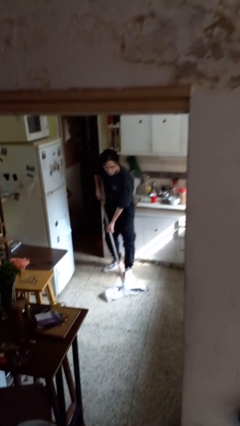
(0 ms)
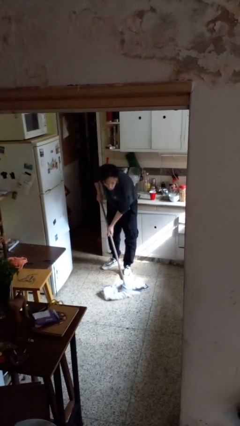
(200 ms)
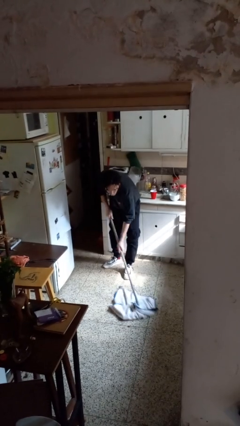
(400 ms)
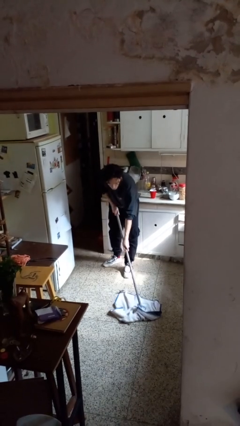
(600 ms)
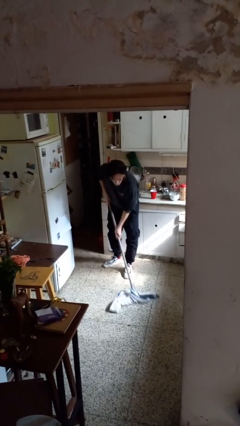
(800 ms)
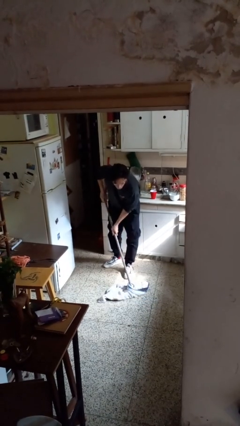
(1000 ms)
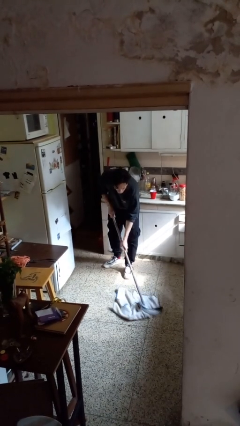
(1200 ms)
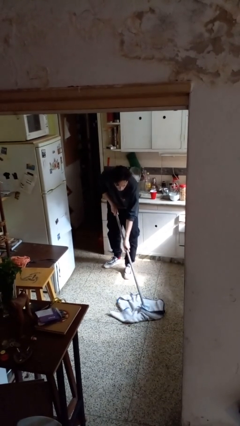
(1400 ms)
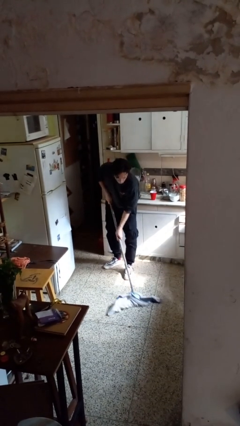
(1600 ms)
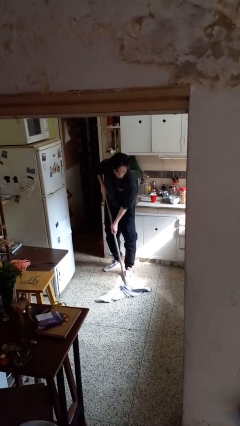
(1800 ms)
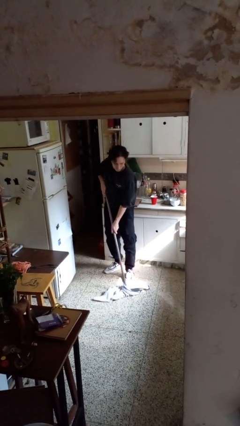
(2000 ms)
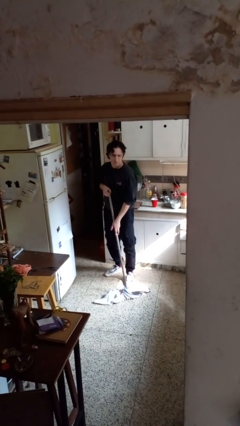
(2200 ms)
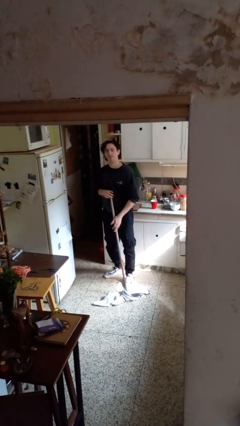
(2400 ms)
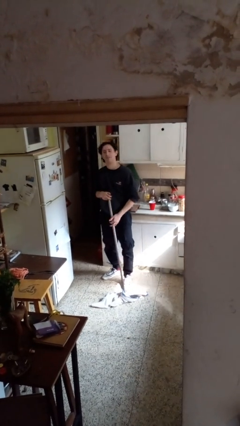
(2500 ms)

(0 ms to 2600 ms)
person mops

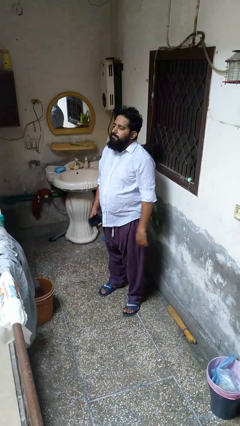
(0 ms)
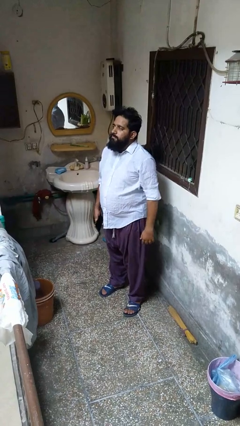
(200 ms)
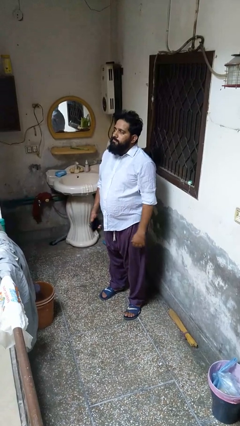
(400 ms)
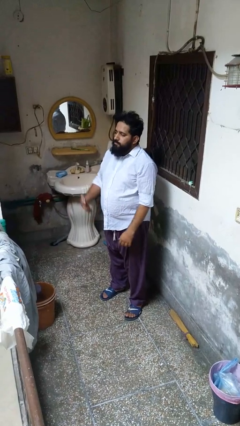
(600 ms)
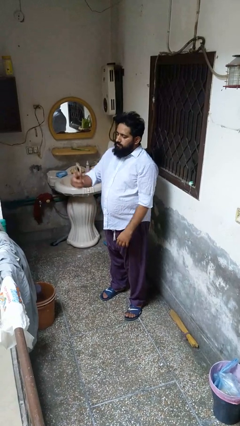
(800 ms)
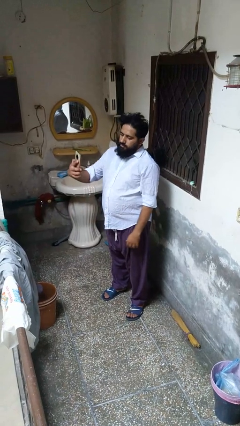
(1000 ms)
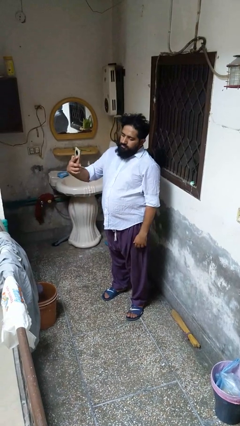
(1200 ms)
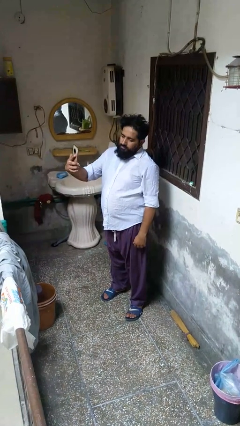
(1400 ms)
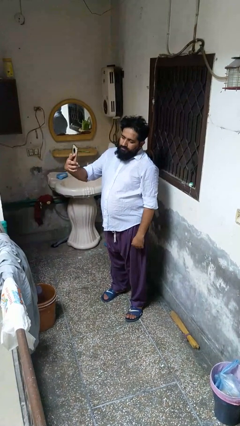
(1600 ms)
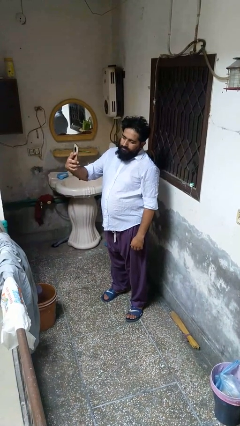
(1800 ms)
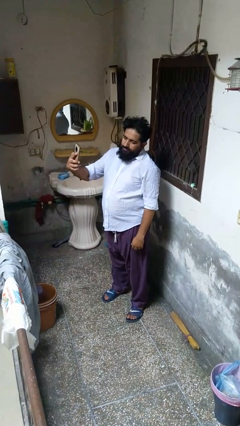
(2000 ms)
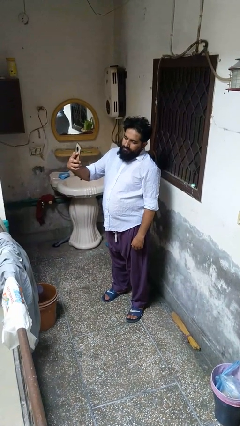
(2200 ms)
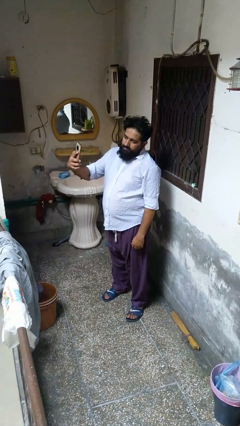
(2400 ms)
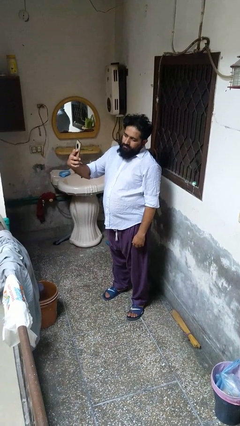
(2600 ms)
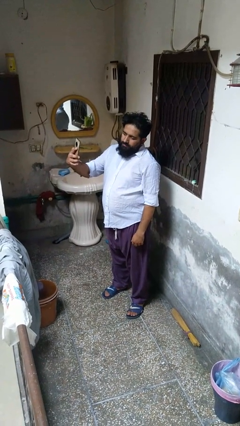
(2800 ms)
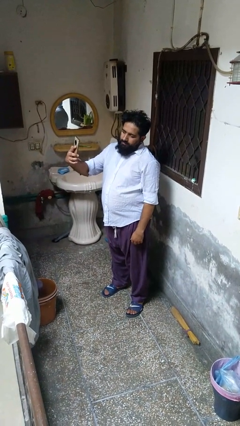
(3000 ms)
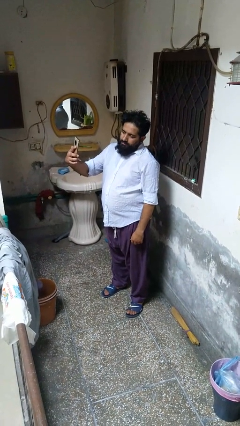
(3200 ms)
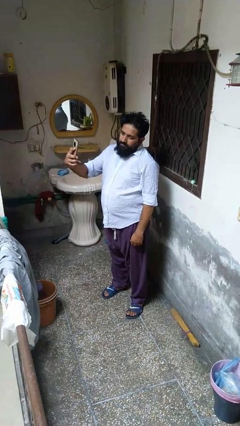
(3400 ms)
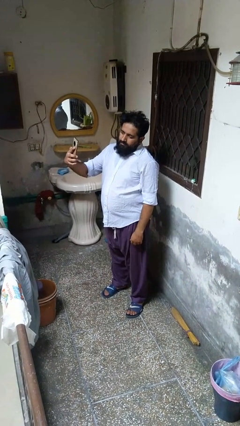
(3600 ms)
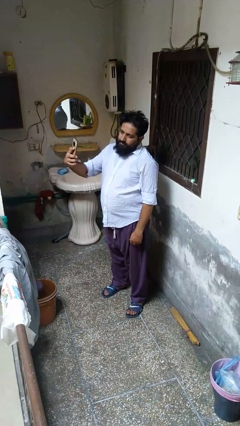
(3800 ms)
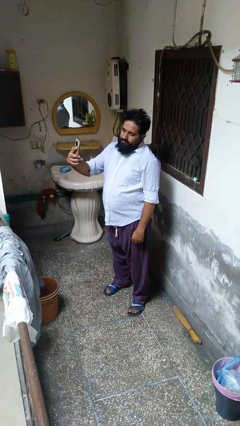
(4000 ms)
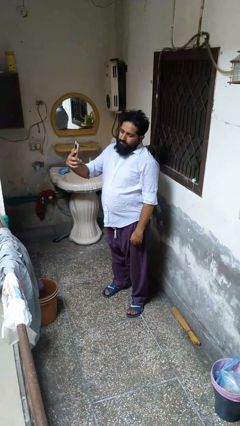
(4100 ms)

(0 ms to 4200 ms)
person takes selfie

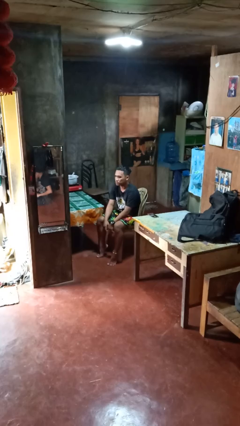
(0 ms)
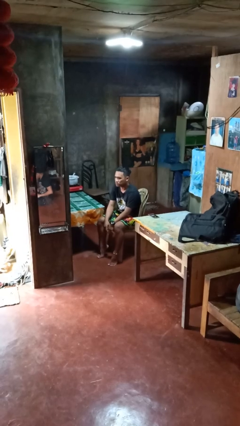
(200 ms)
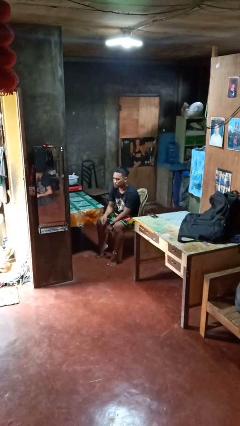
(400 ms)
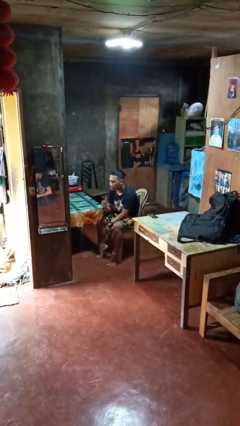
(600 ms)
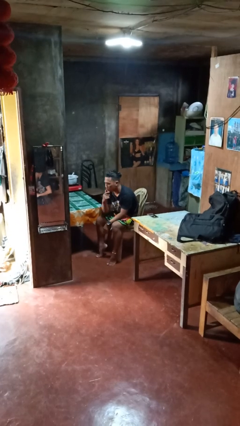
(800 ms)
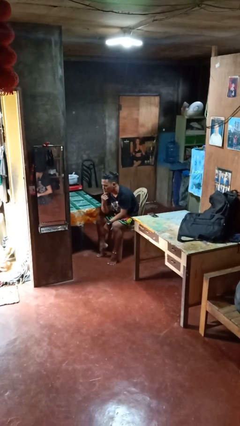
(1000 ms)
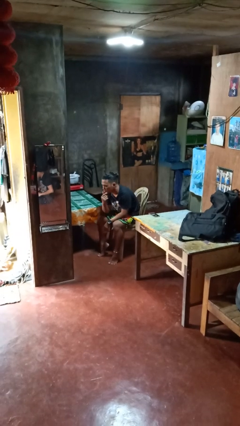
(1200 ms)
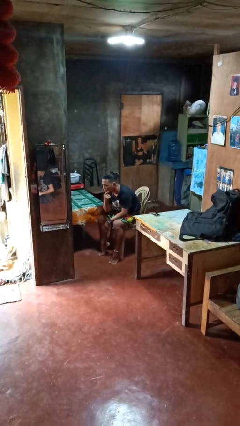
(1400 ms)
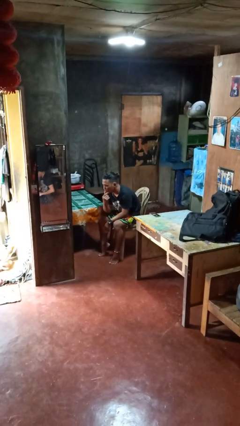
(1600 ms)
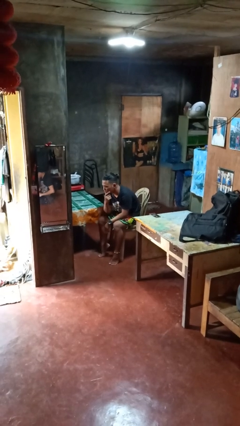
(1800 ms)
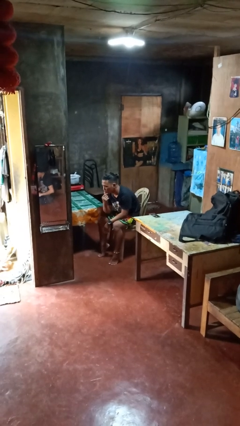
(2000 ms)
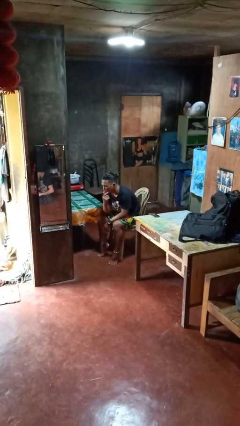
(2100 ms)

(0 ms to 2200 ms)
person strokes chin

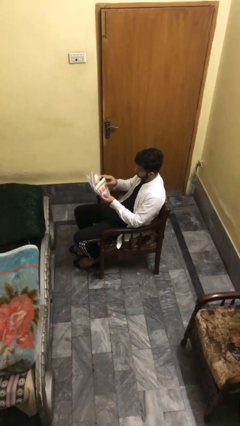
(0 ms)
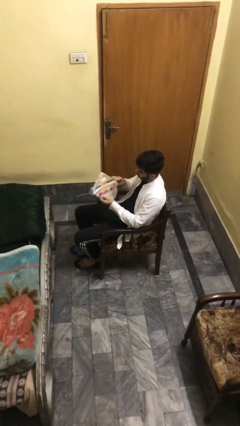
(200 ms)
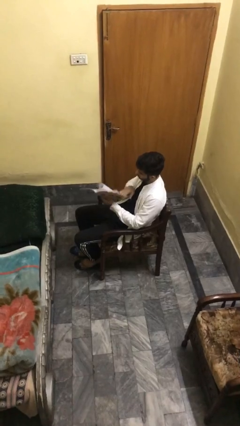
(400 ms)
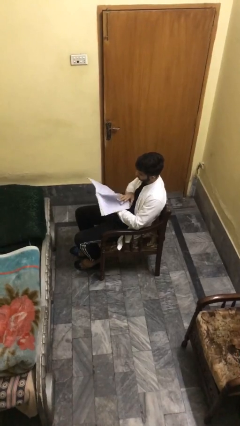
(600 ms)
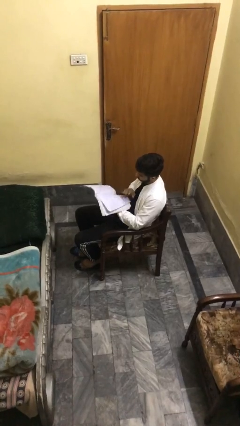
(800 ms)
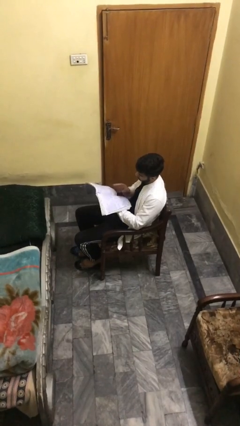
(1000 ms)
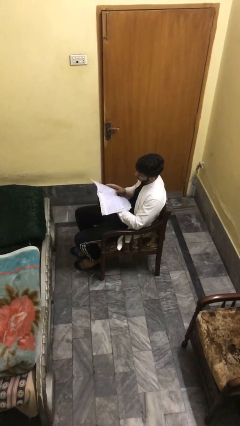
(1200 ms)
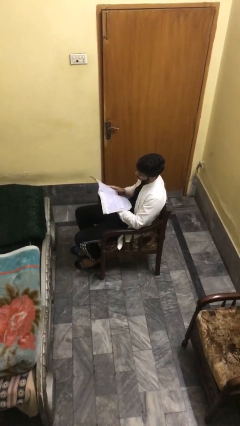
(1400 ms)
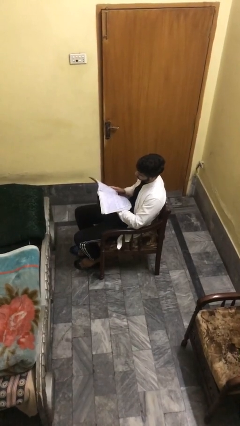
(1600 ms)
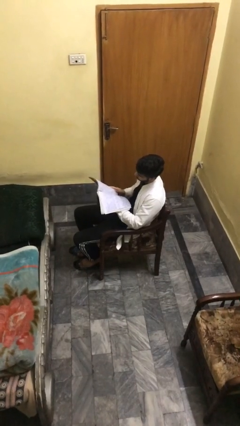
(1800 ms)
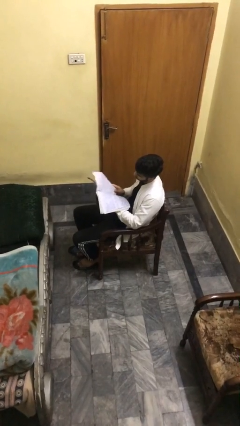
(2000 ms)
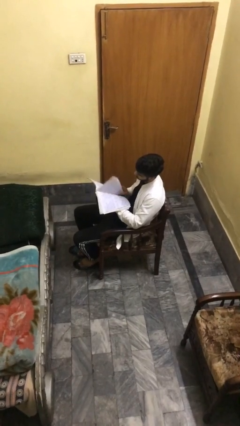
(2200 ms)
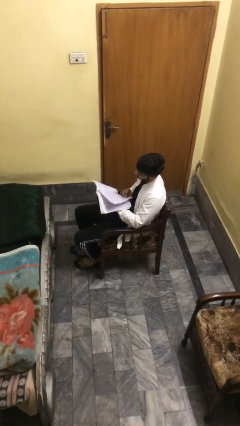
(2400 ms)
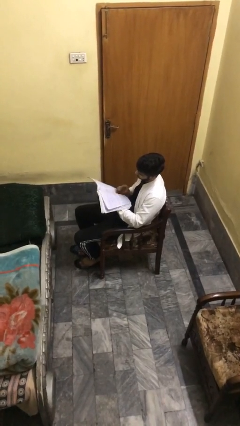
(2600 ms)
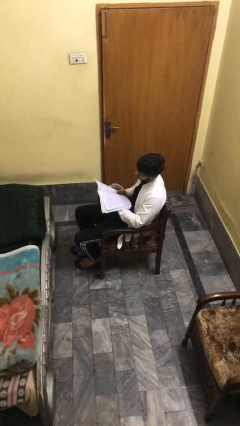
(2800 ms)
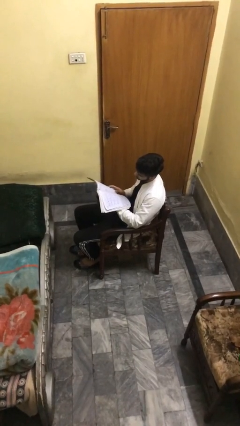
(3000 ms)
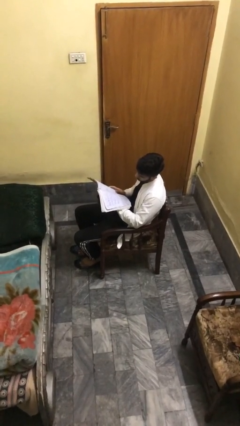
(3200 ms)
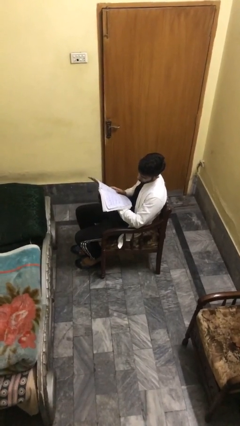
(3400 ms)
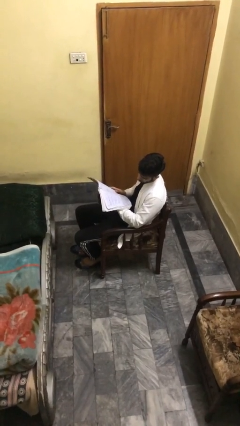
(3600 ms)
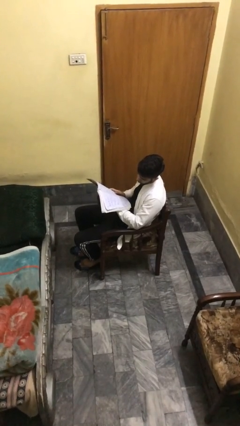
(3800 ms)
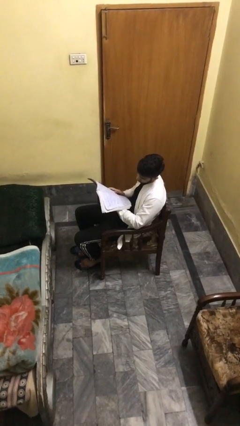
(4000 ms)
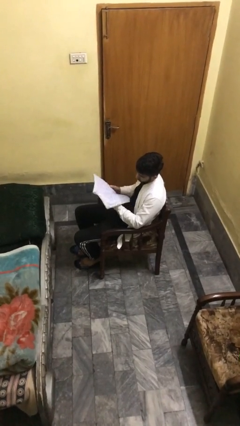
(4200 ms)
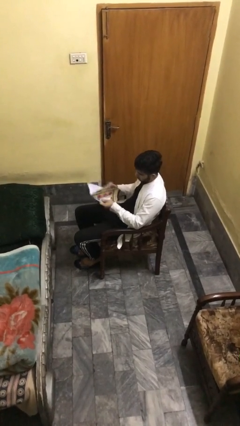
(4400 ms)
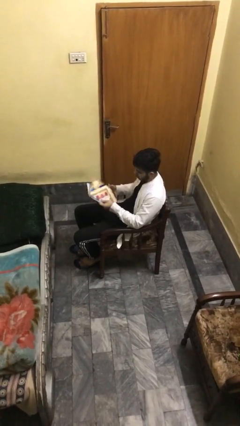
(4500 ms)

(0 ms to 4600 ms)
person reads document

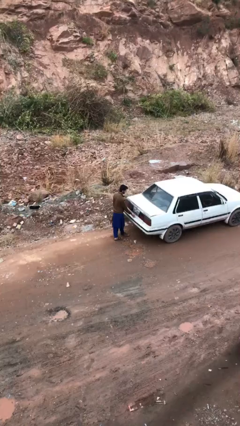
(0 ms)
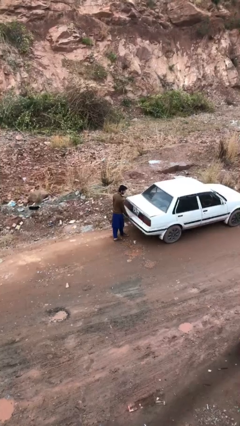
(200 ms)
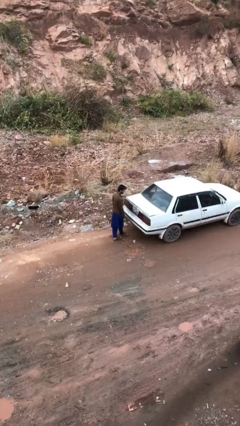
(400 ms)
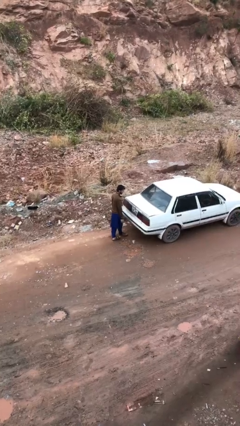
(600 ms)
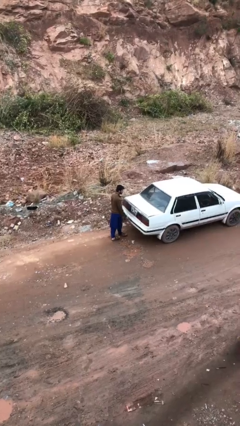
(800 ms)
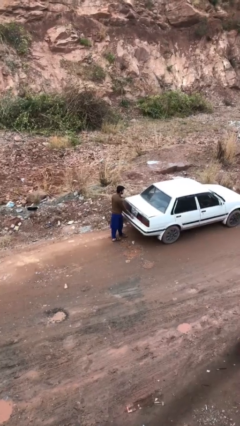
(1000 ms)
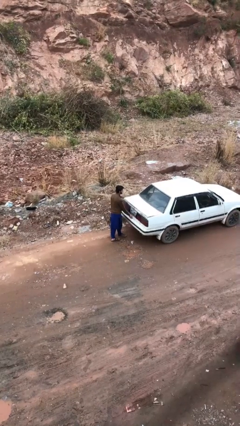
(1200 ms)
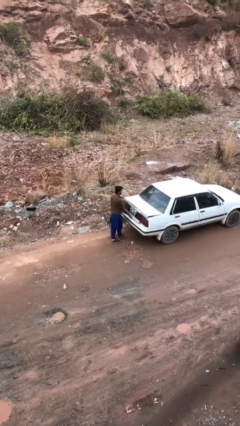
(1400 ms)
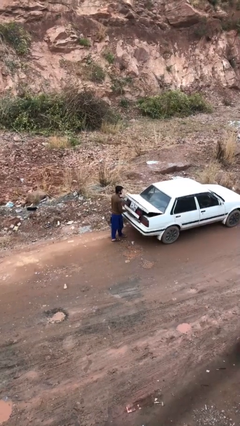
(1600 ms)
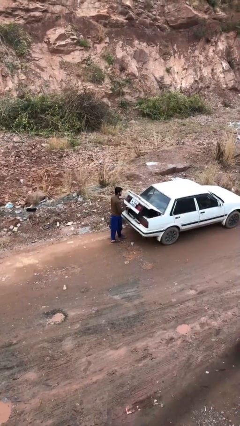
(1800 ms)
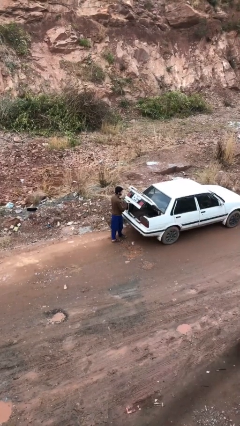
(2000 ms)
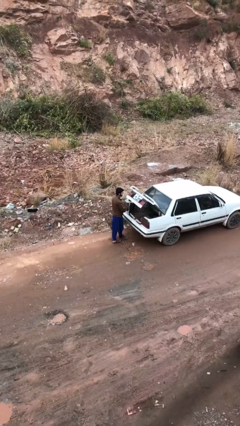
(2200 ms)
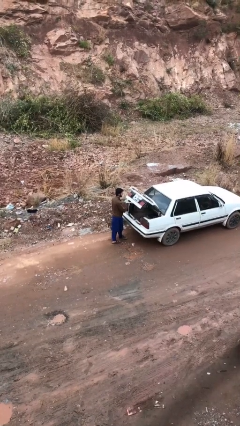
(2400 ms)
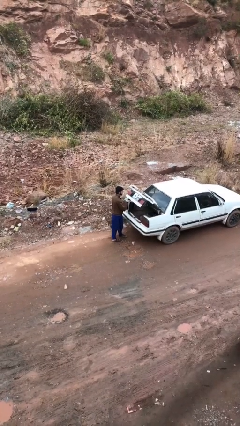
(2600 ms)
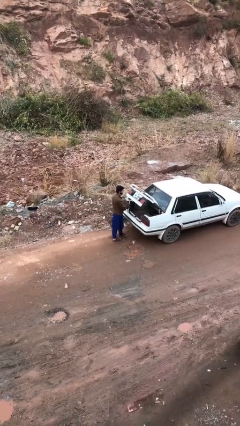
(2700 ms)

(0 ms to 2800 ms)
person opens car trunk

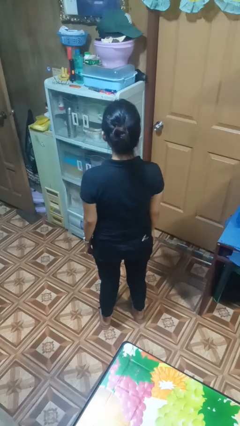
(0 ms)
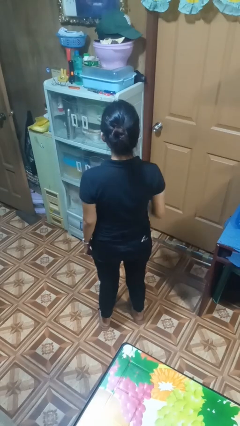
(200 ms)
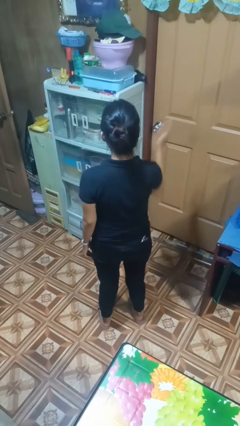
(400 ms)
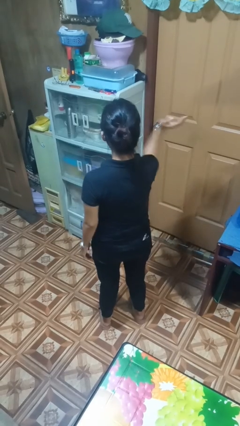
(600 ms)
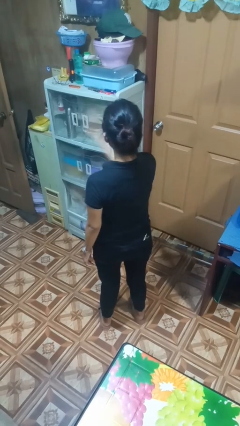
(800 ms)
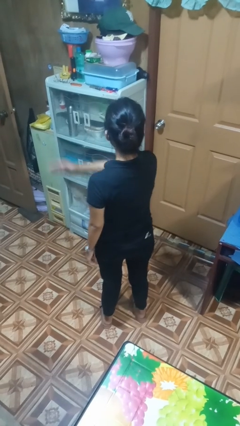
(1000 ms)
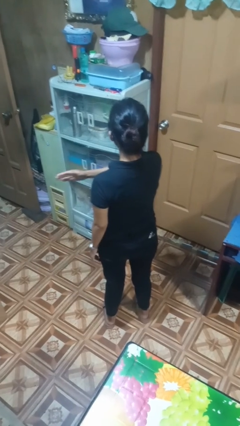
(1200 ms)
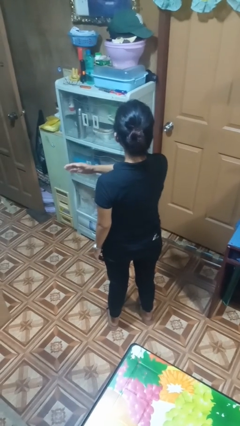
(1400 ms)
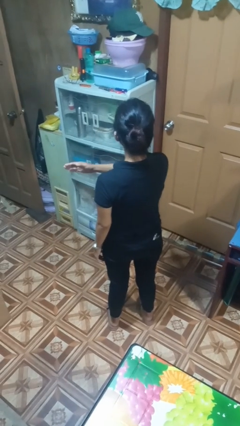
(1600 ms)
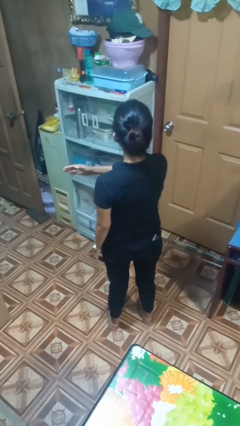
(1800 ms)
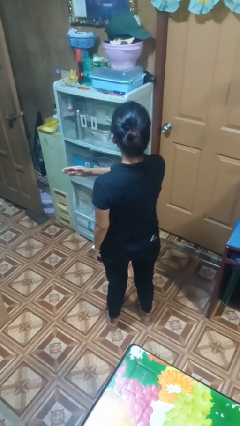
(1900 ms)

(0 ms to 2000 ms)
person gestures swipe left
